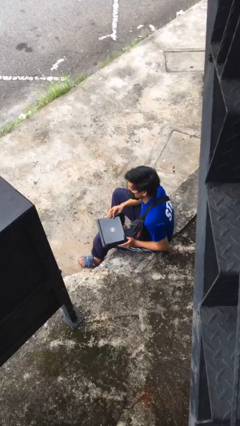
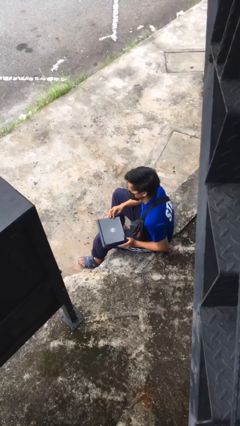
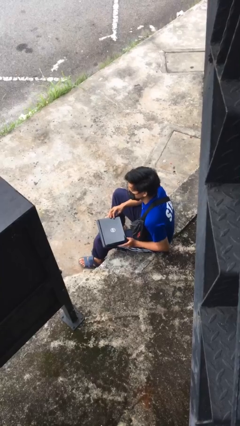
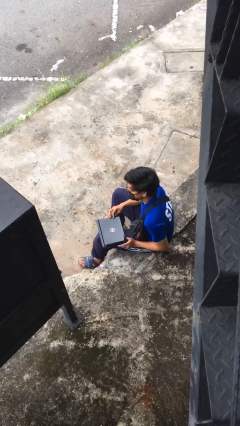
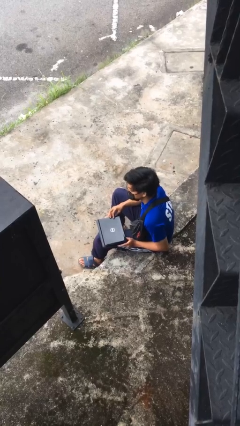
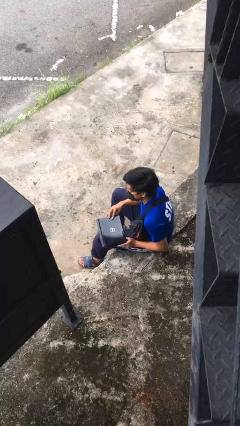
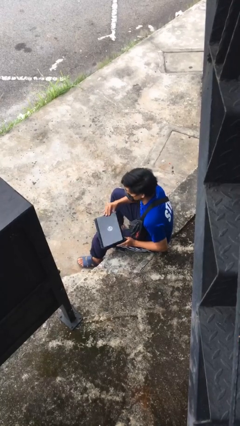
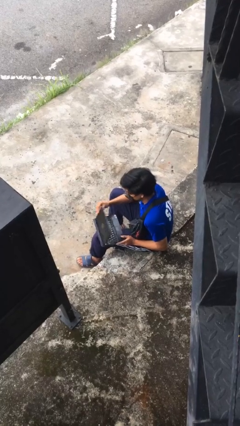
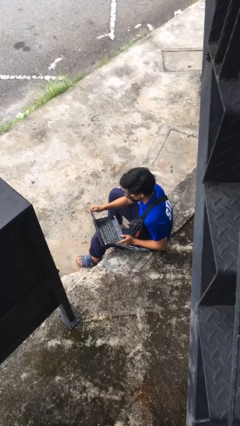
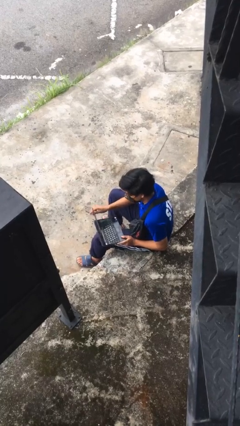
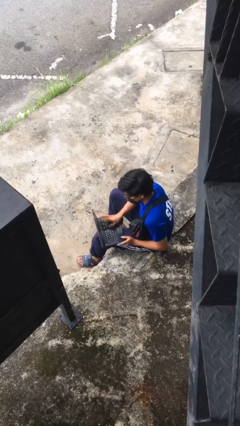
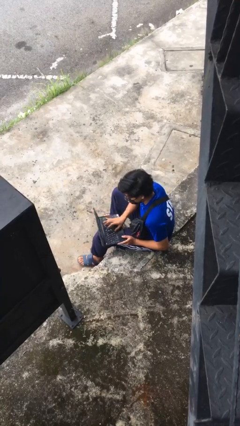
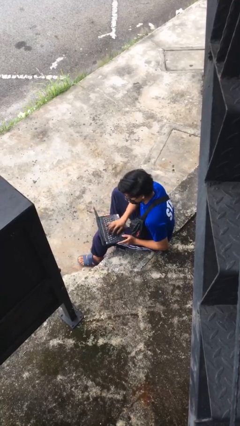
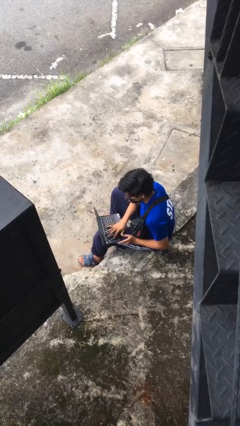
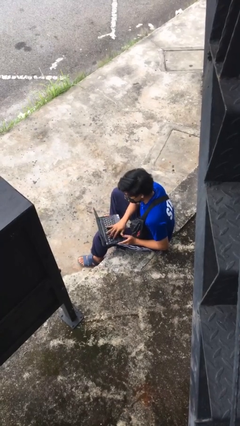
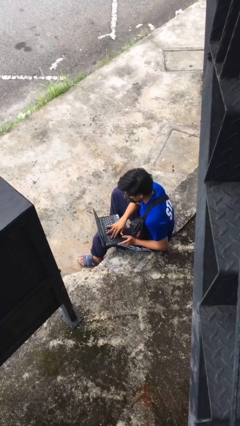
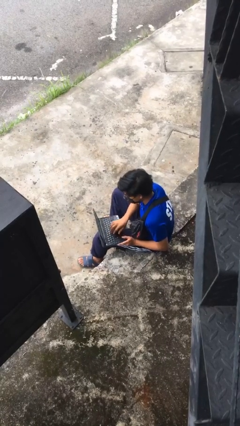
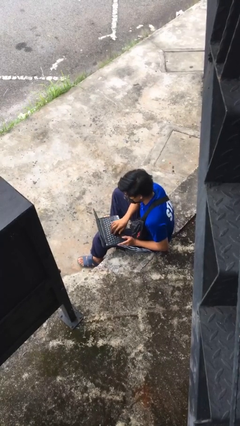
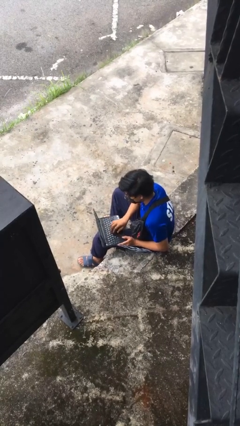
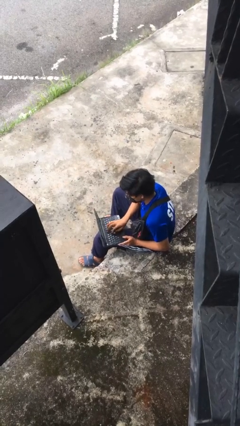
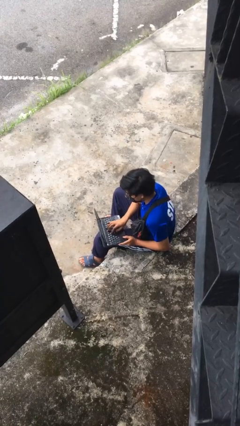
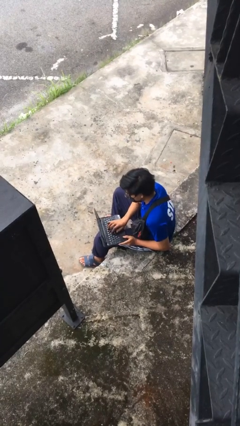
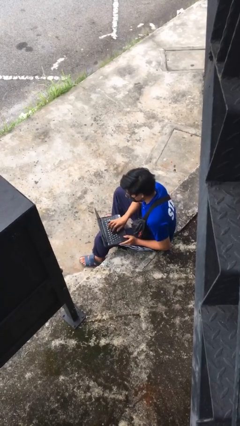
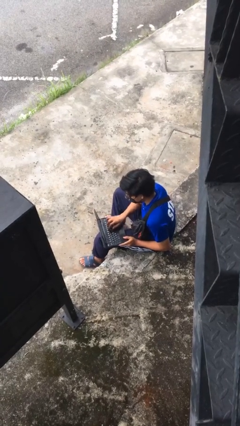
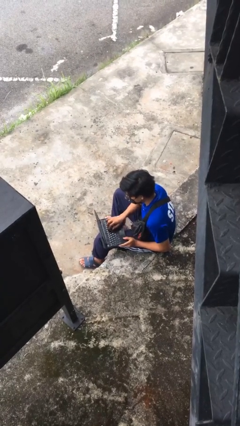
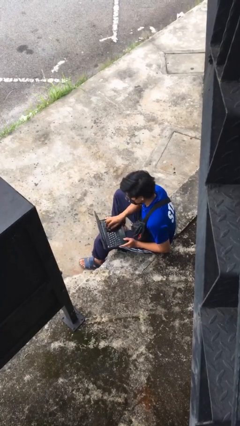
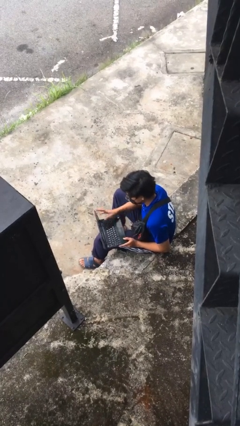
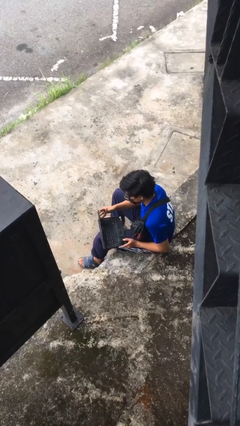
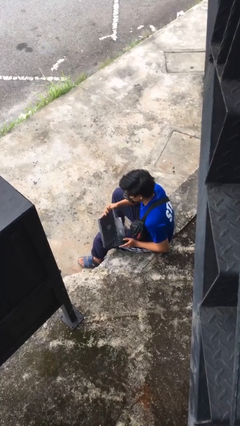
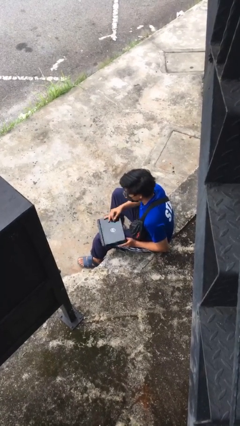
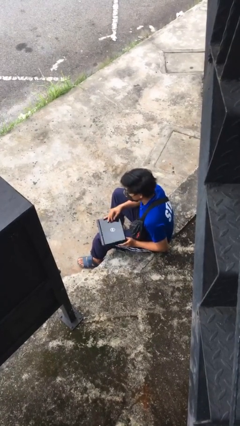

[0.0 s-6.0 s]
person interacts with laptop

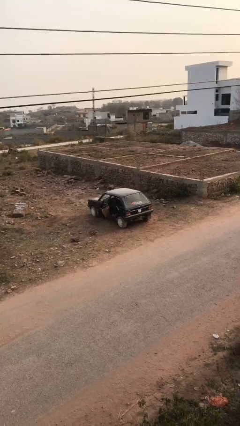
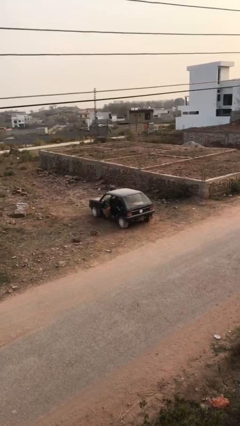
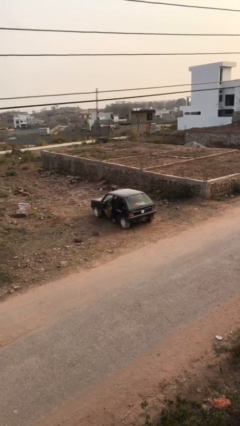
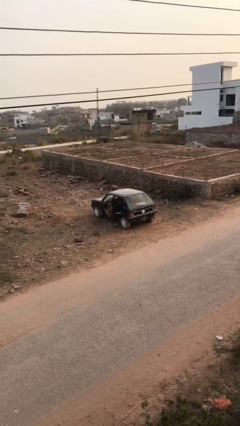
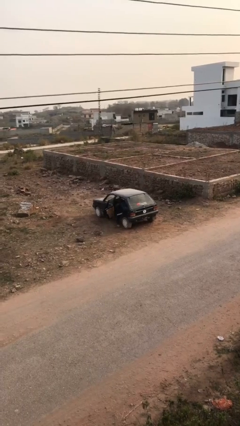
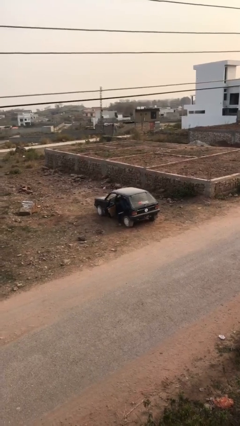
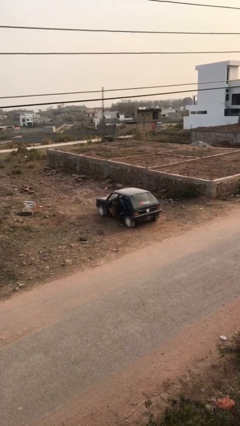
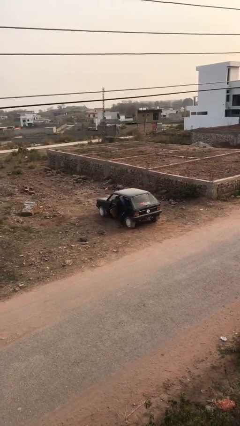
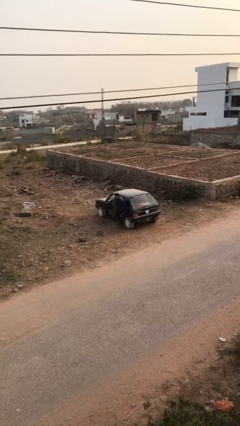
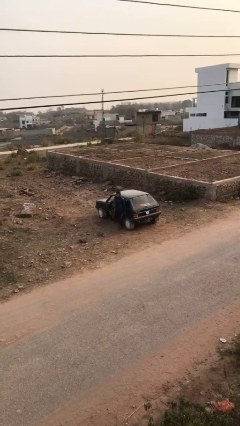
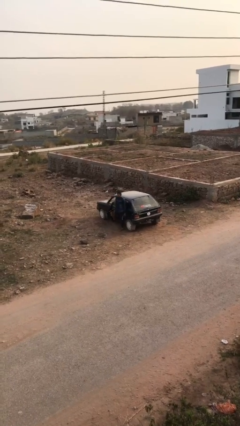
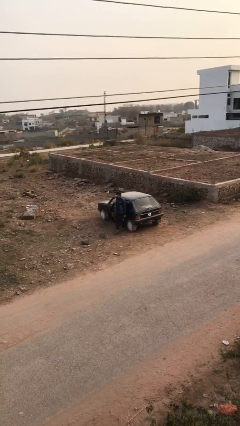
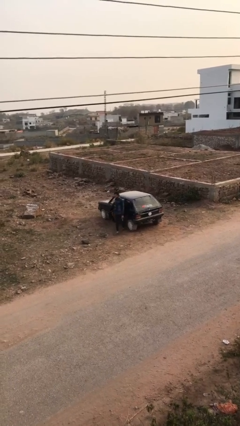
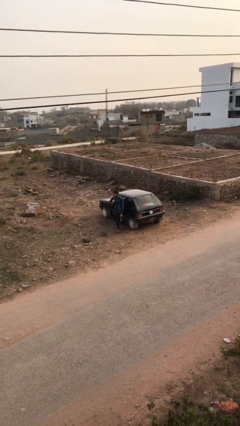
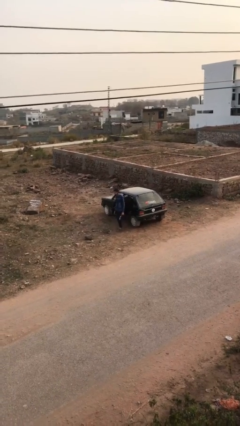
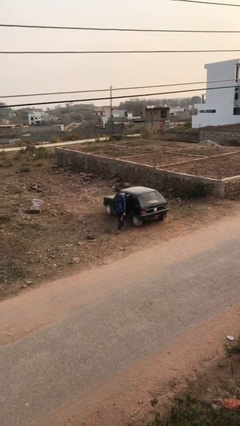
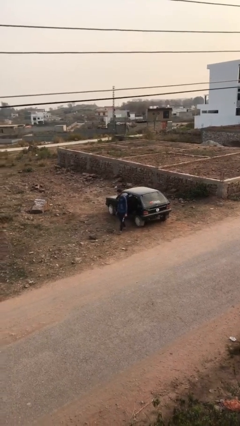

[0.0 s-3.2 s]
person exits car

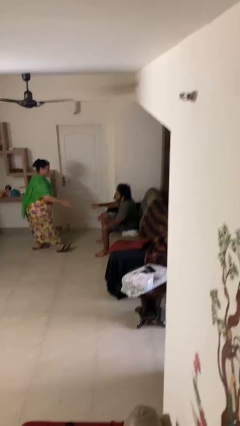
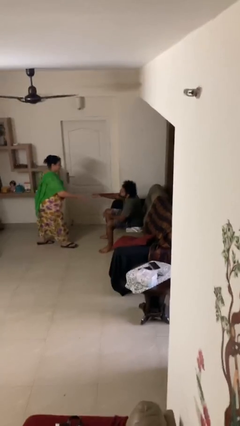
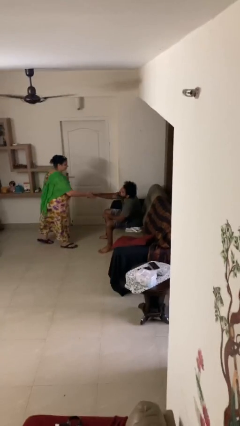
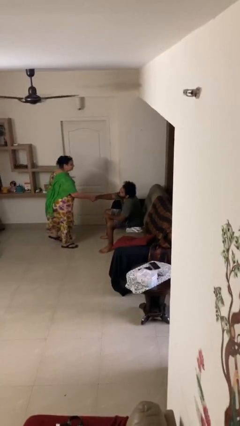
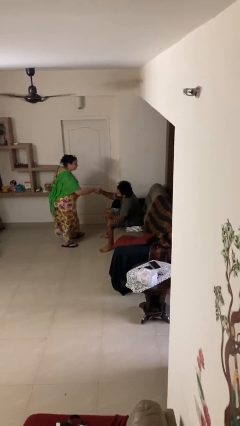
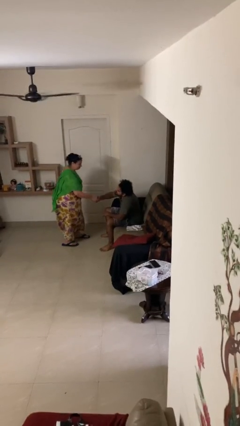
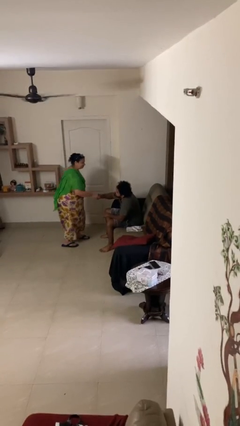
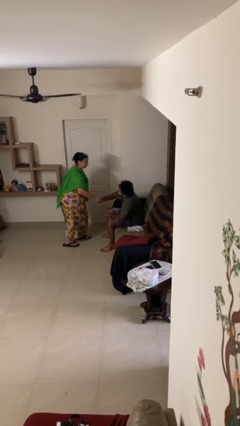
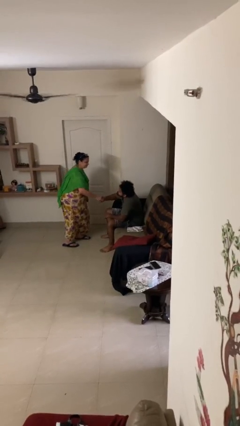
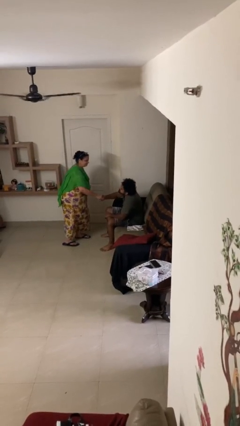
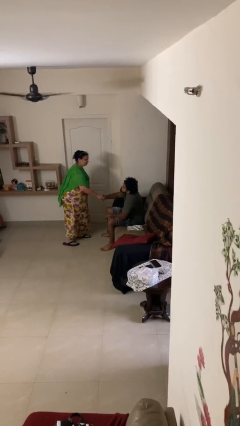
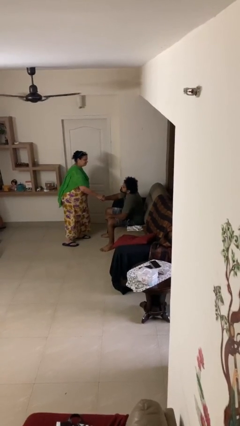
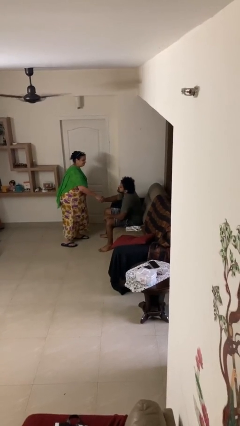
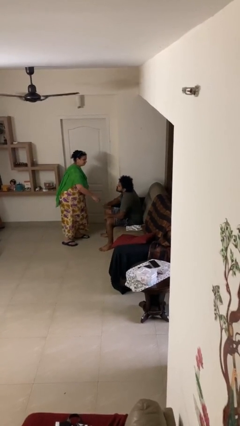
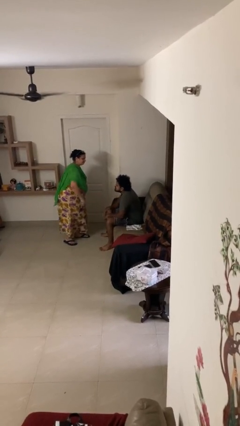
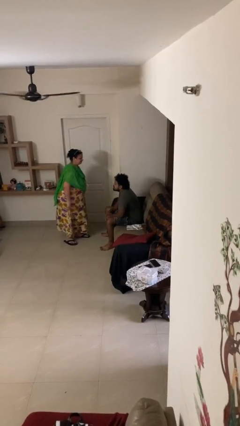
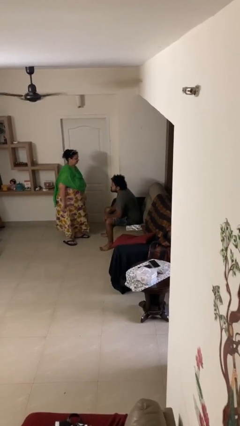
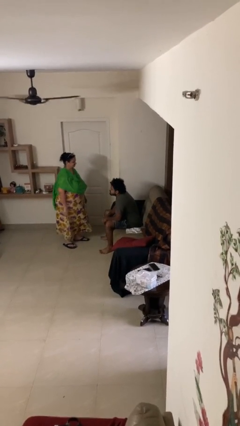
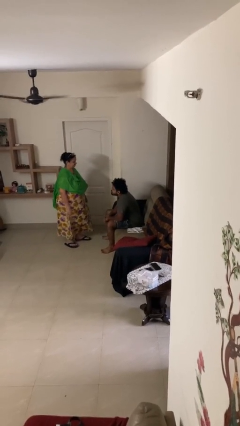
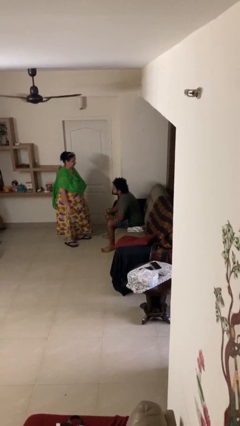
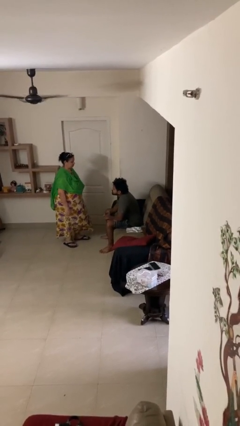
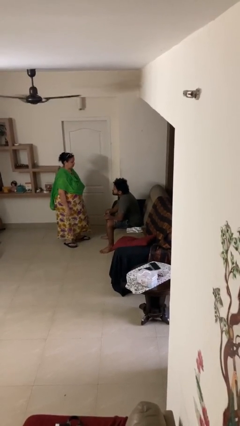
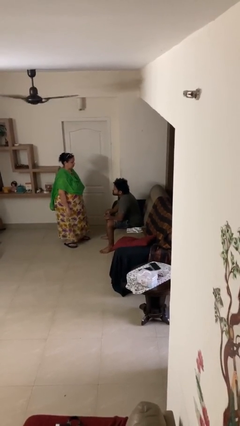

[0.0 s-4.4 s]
person shakes hand

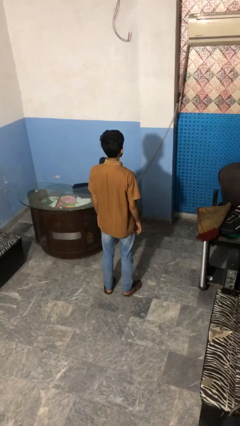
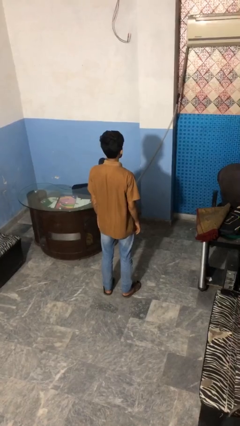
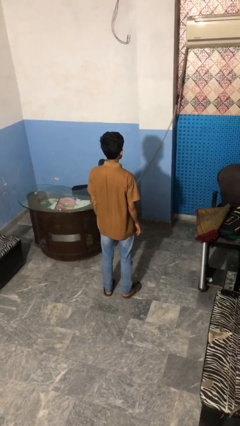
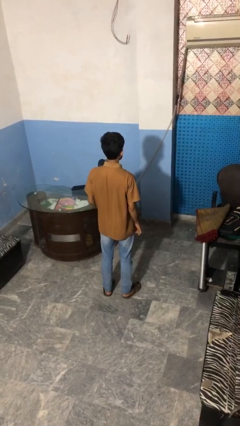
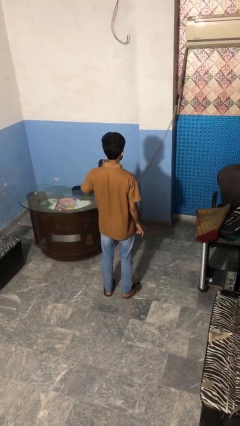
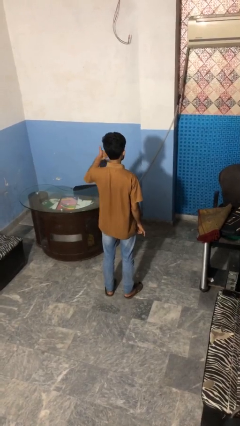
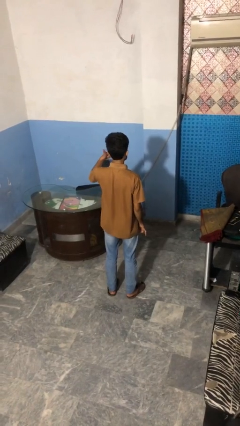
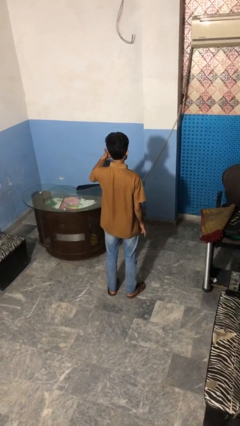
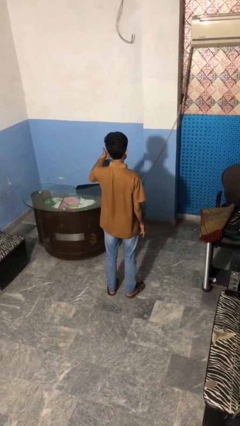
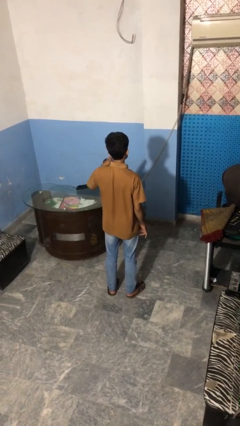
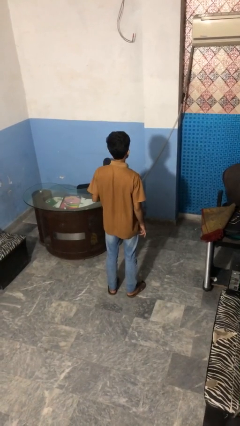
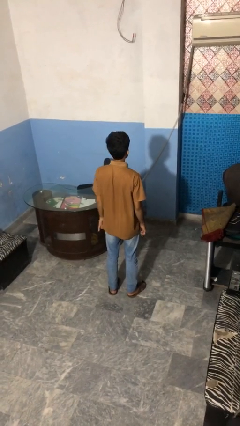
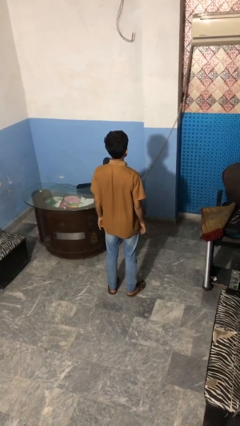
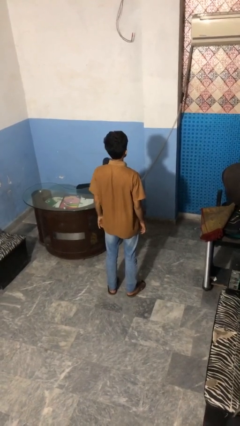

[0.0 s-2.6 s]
person gestures call me

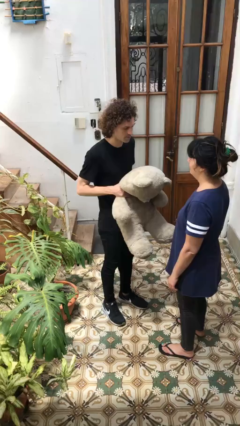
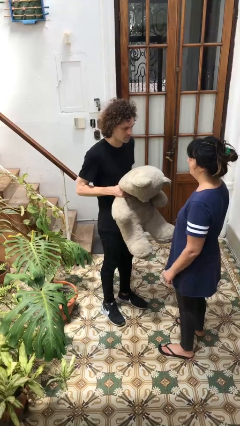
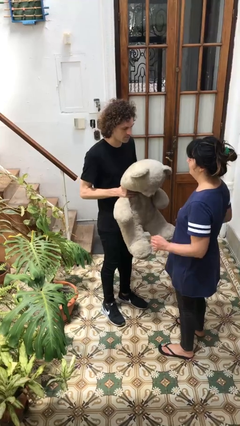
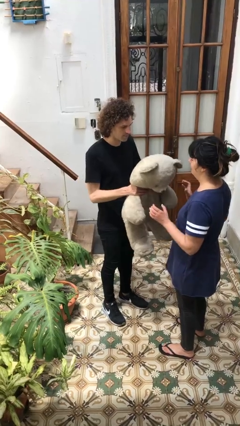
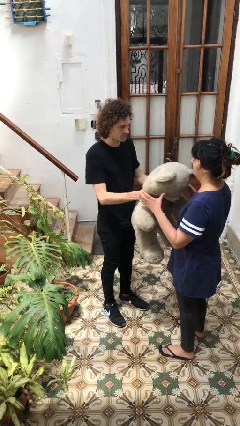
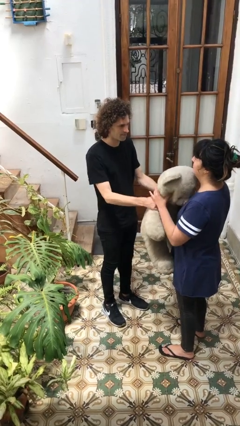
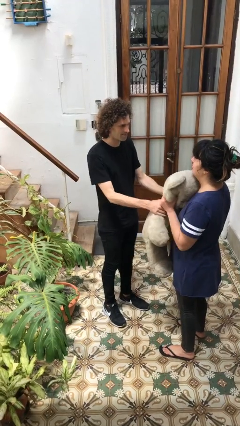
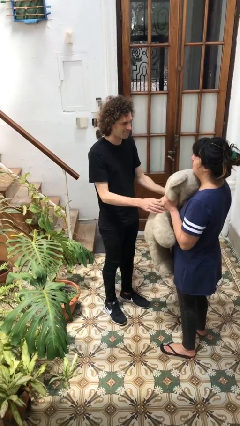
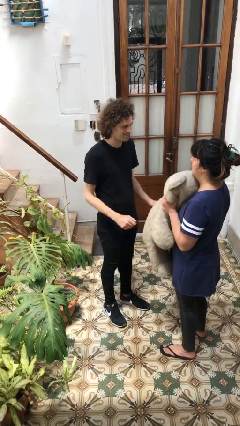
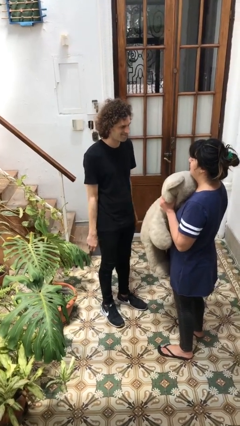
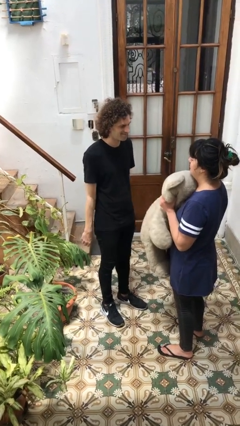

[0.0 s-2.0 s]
person transfers object to person
